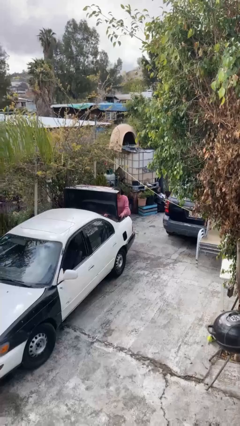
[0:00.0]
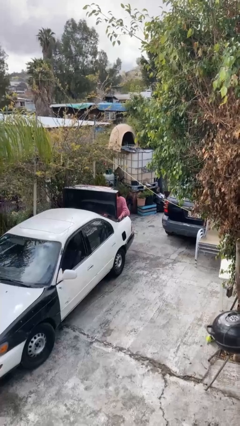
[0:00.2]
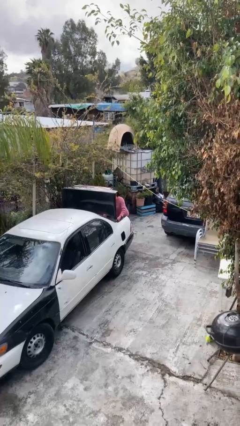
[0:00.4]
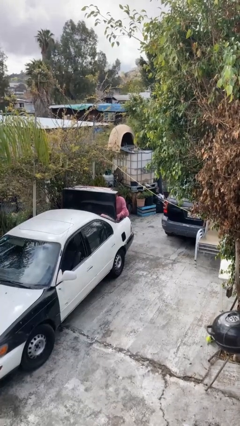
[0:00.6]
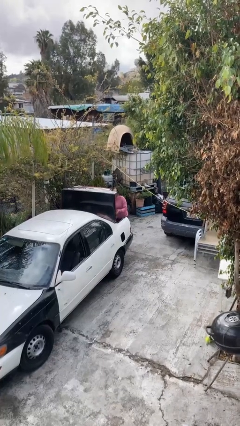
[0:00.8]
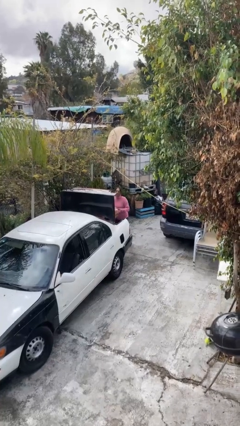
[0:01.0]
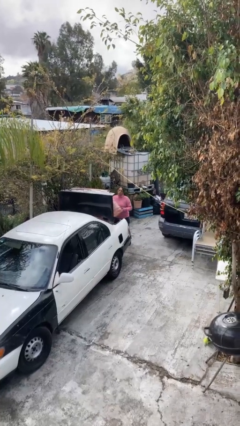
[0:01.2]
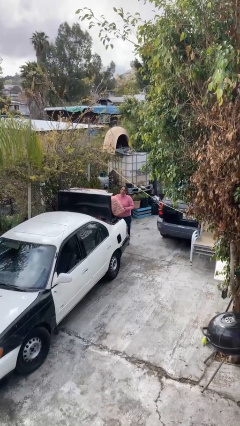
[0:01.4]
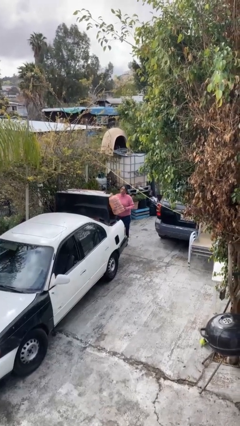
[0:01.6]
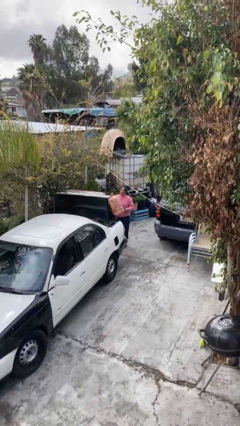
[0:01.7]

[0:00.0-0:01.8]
person unloads car

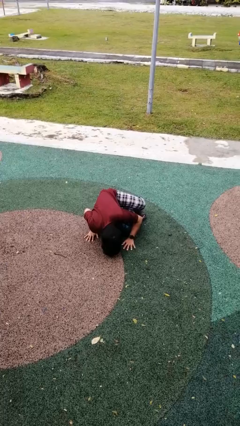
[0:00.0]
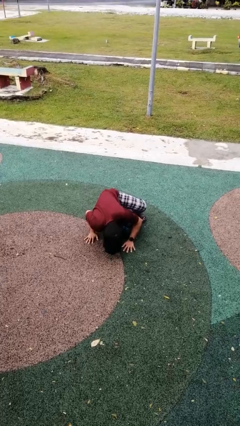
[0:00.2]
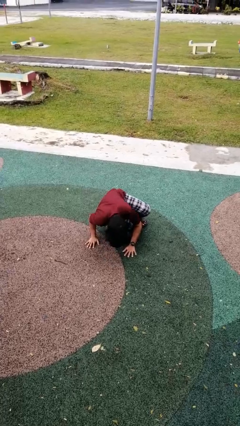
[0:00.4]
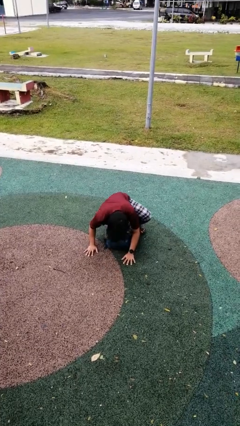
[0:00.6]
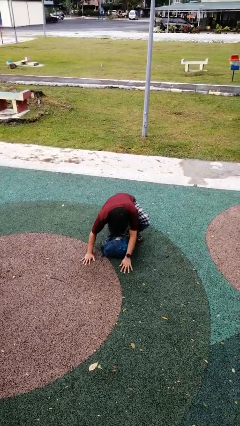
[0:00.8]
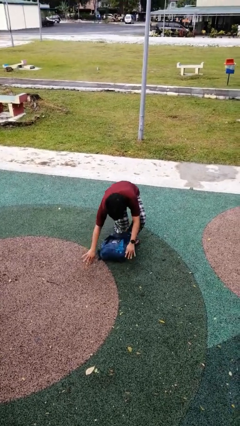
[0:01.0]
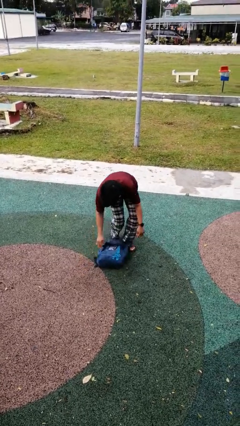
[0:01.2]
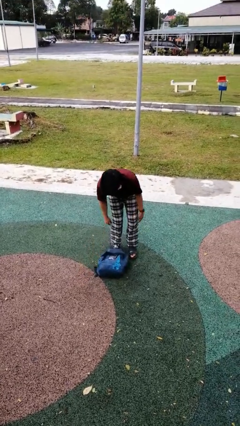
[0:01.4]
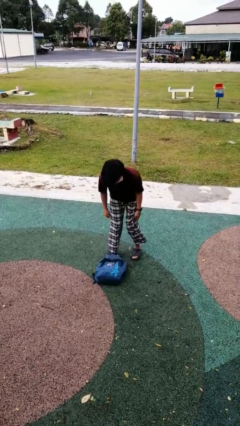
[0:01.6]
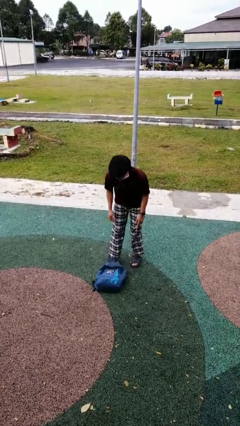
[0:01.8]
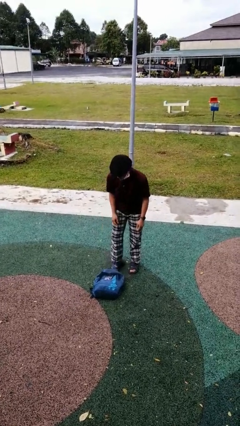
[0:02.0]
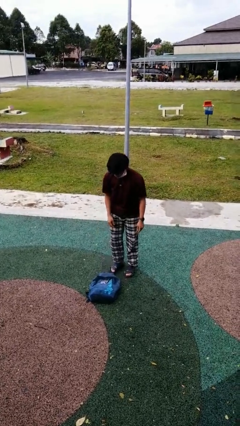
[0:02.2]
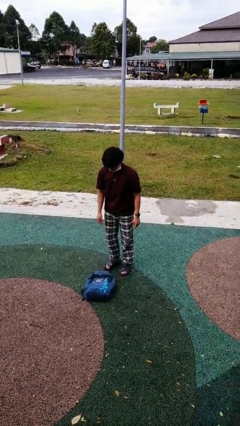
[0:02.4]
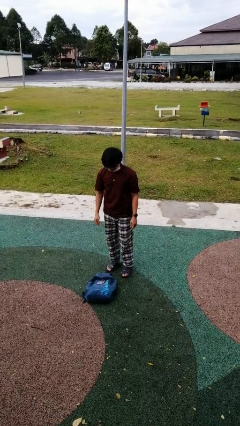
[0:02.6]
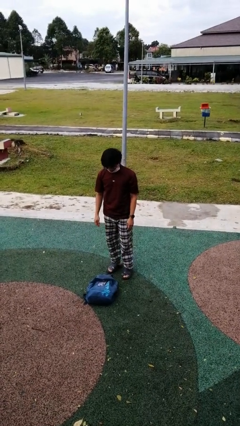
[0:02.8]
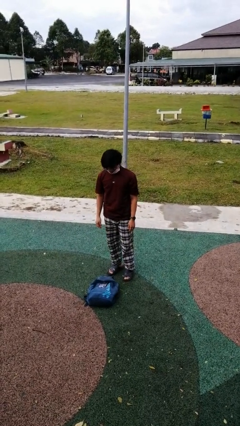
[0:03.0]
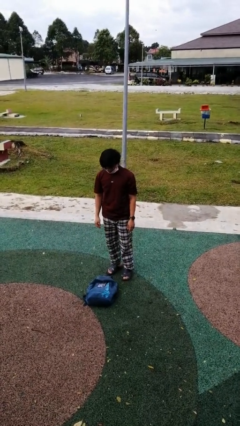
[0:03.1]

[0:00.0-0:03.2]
person stands up from floor

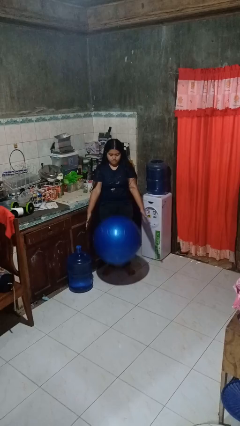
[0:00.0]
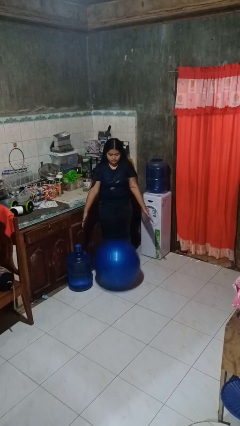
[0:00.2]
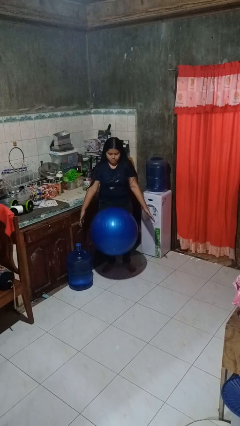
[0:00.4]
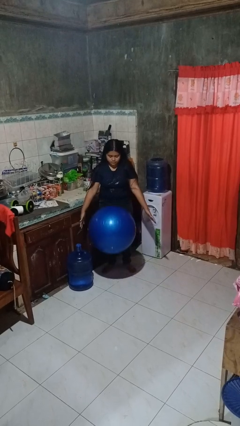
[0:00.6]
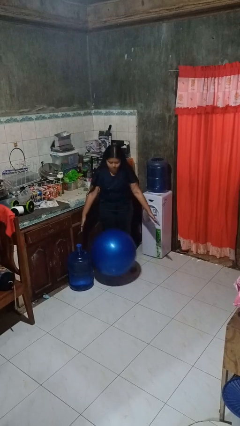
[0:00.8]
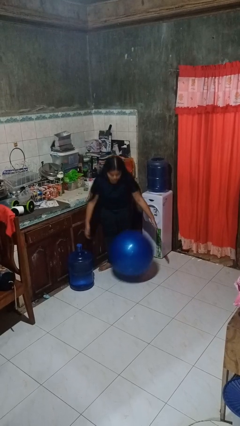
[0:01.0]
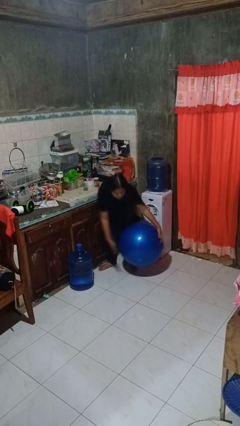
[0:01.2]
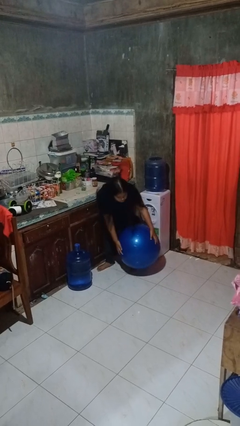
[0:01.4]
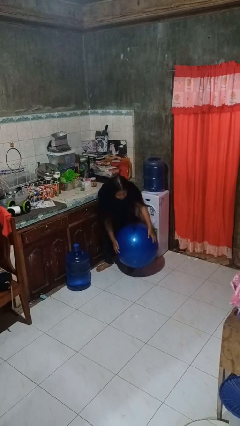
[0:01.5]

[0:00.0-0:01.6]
person bounces ball on floor

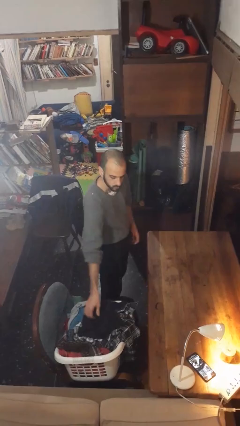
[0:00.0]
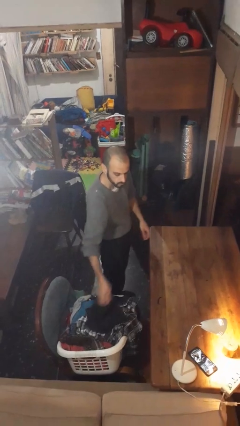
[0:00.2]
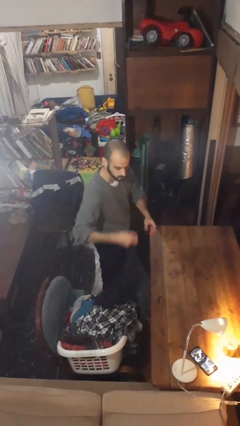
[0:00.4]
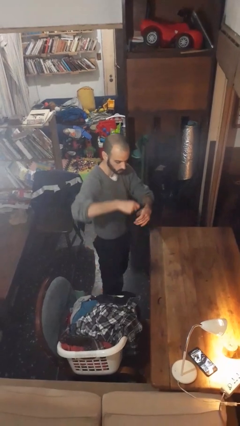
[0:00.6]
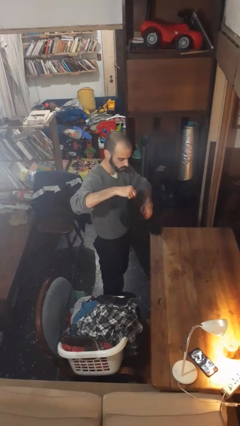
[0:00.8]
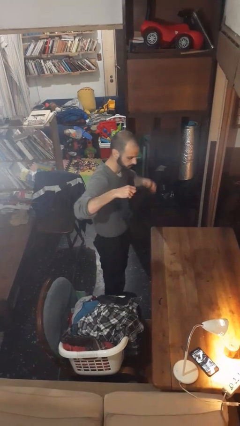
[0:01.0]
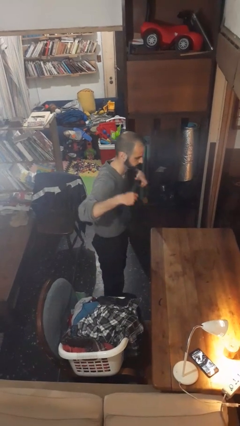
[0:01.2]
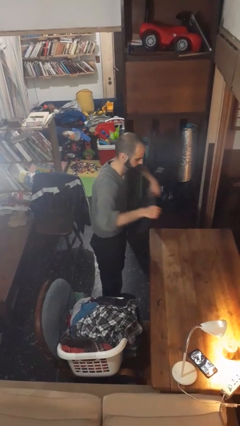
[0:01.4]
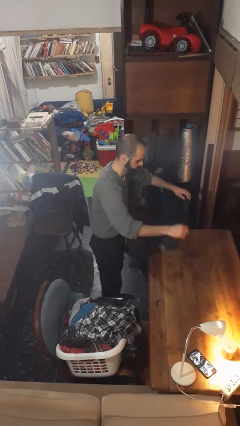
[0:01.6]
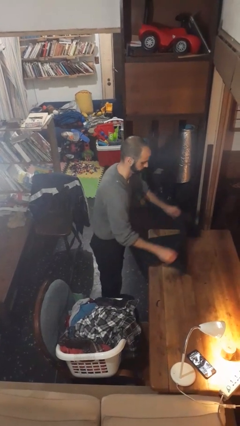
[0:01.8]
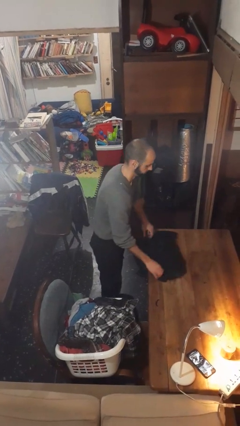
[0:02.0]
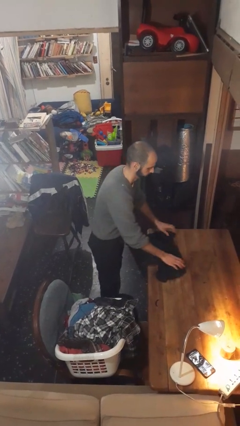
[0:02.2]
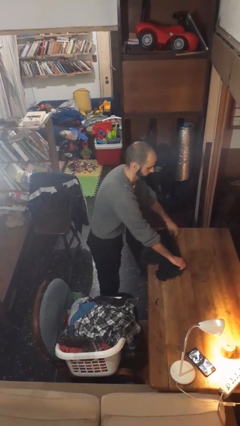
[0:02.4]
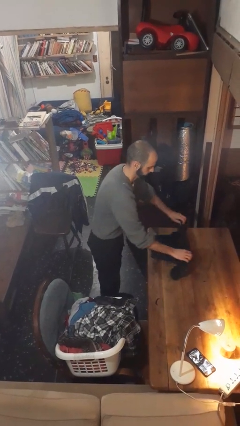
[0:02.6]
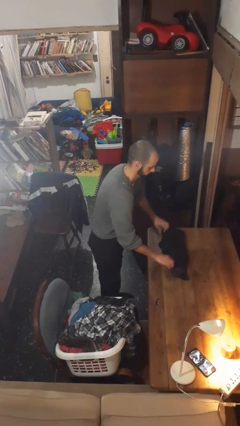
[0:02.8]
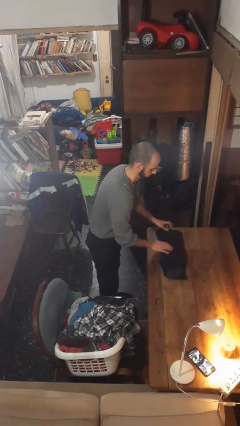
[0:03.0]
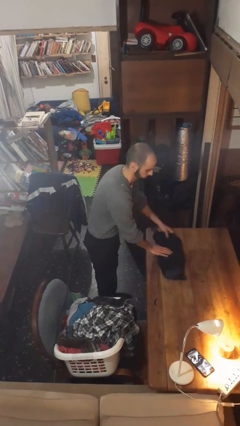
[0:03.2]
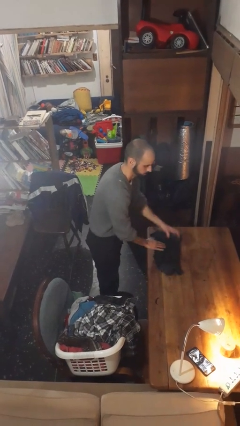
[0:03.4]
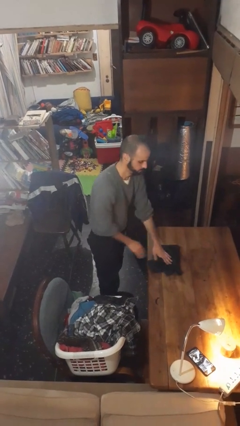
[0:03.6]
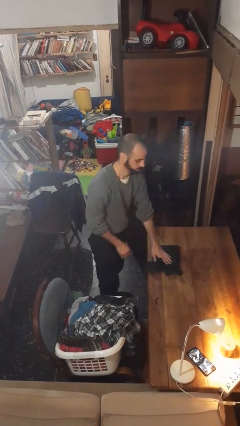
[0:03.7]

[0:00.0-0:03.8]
person folds shirt

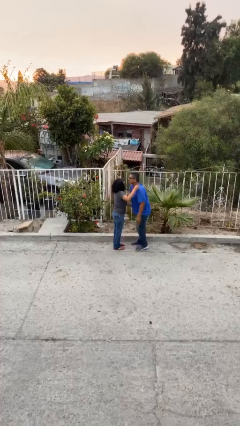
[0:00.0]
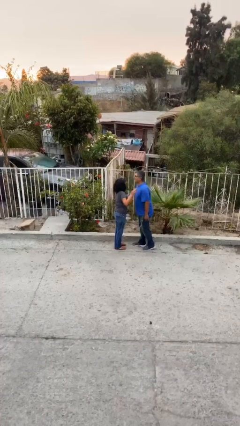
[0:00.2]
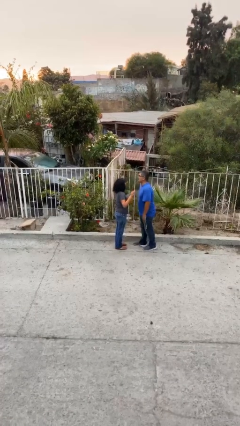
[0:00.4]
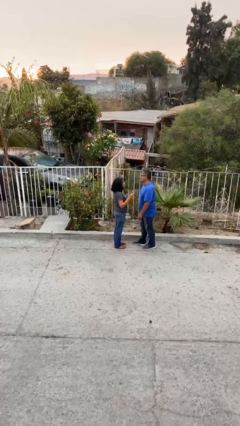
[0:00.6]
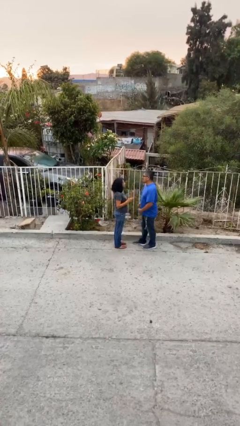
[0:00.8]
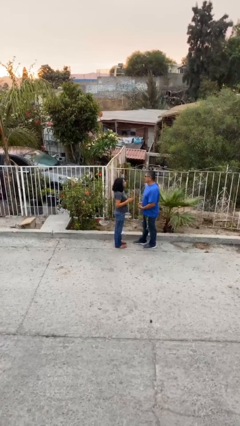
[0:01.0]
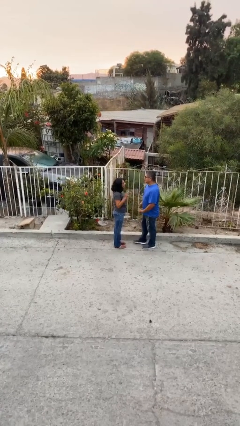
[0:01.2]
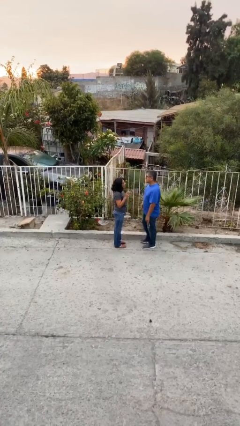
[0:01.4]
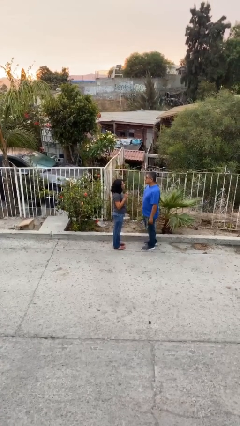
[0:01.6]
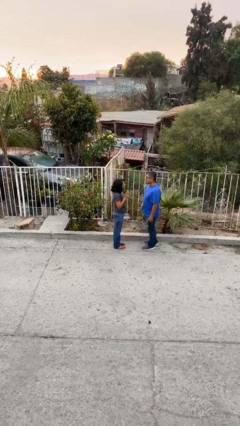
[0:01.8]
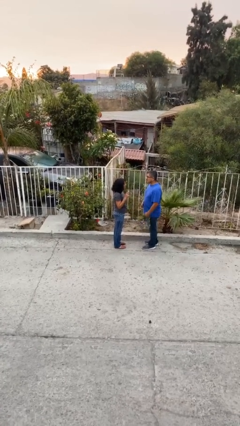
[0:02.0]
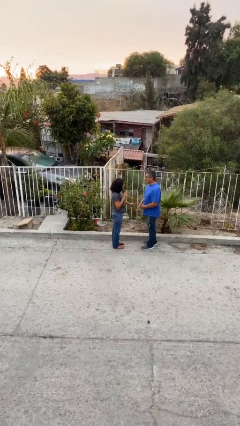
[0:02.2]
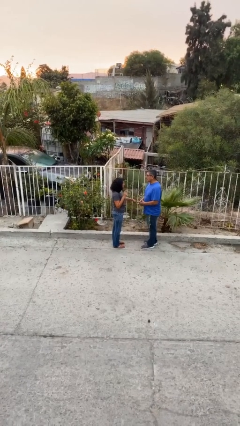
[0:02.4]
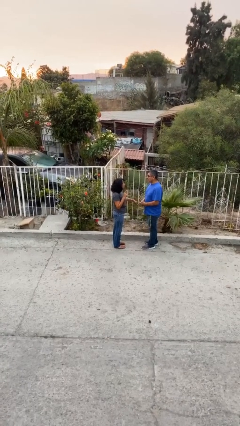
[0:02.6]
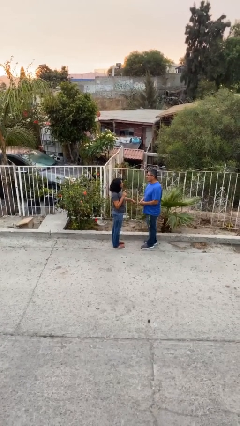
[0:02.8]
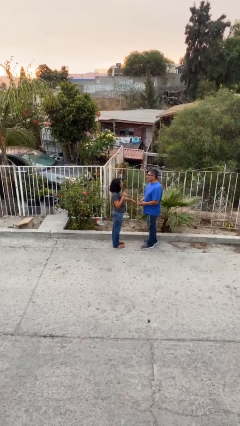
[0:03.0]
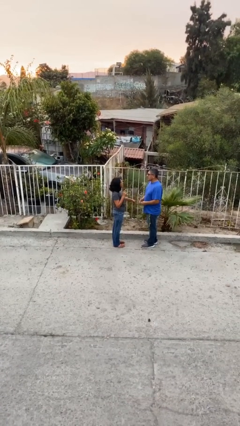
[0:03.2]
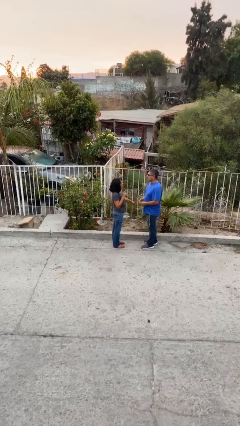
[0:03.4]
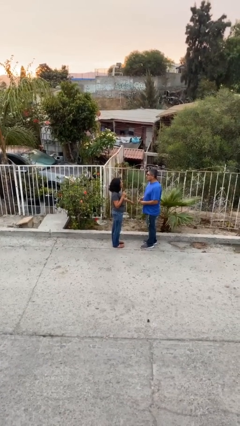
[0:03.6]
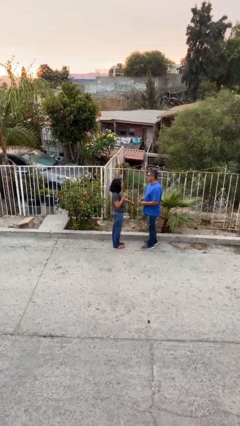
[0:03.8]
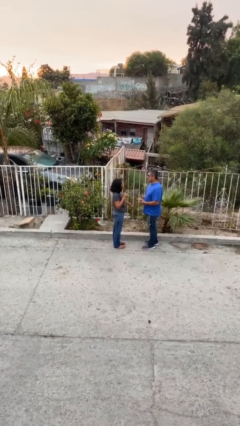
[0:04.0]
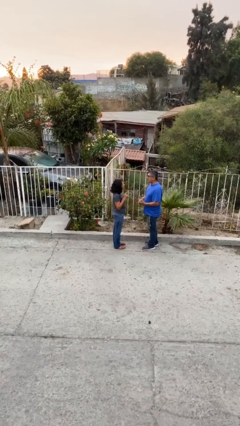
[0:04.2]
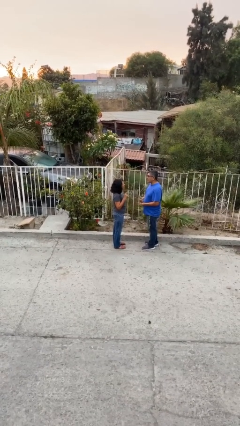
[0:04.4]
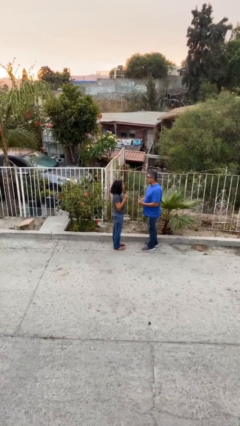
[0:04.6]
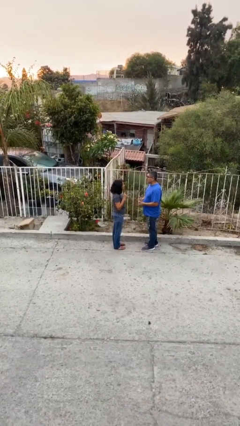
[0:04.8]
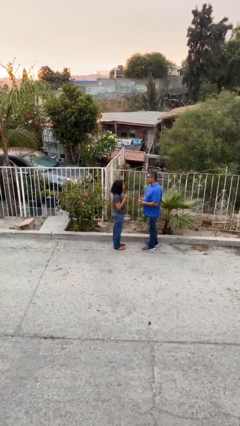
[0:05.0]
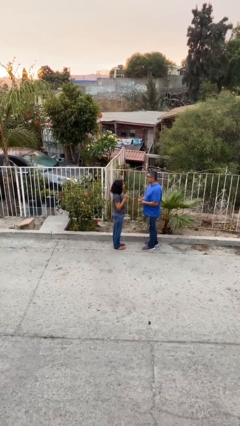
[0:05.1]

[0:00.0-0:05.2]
person talks to person

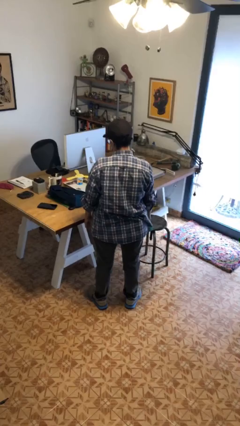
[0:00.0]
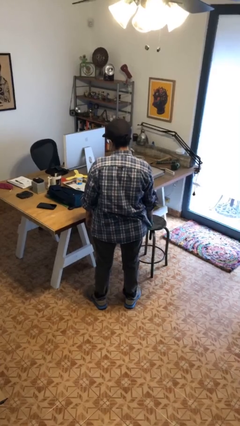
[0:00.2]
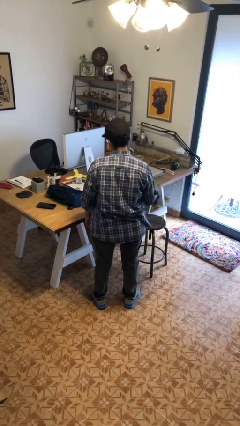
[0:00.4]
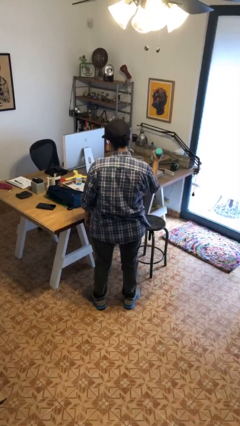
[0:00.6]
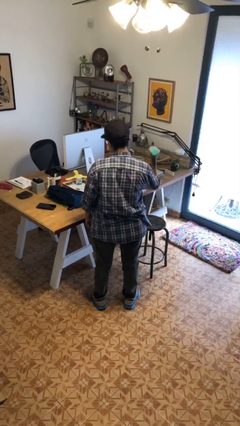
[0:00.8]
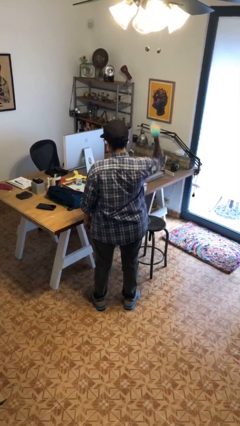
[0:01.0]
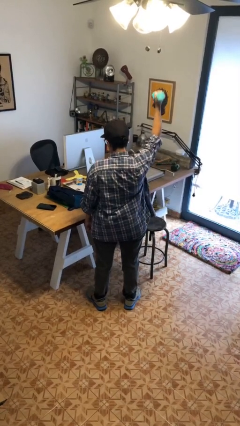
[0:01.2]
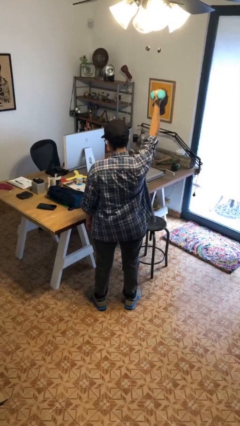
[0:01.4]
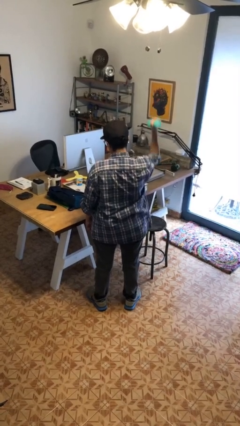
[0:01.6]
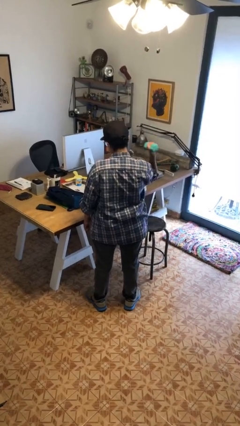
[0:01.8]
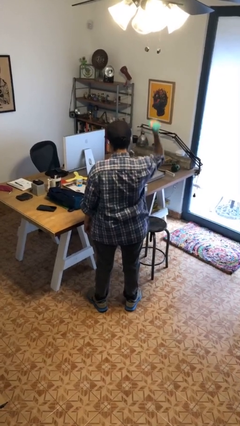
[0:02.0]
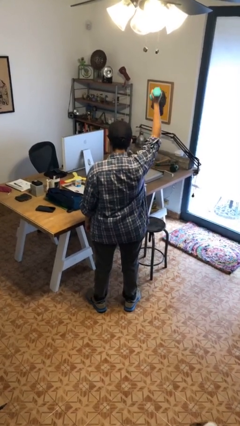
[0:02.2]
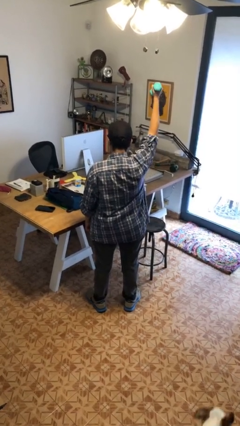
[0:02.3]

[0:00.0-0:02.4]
person lifts dumbbells
